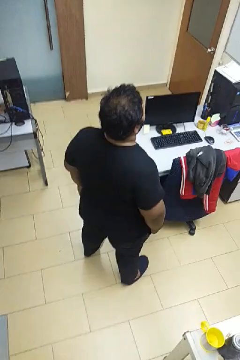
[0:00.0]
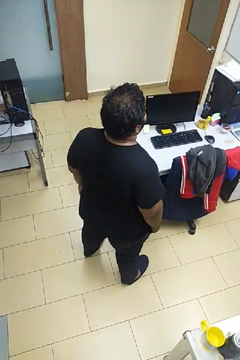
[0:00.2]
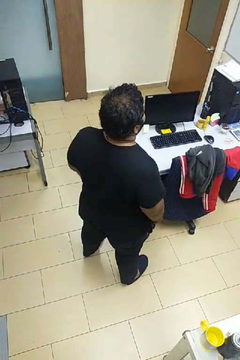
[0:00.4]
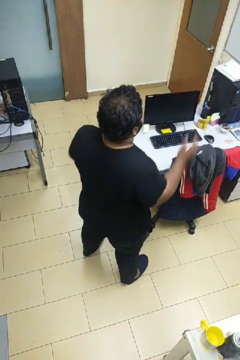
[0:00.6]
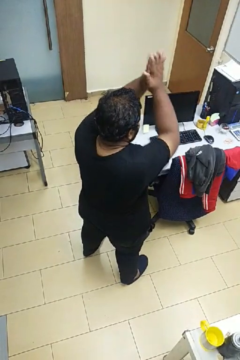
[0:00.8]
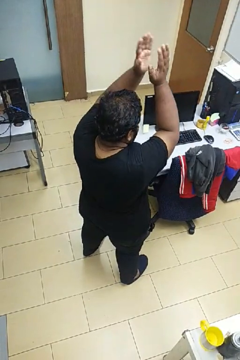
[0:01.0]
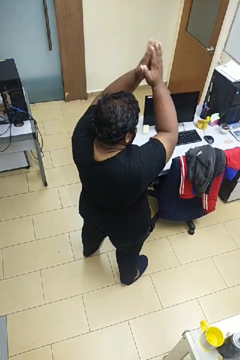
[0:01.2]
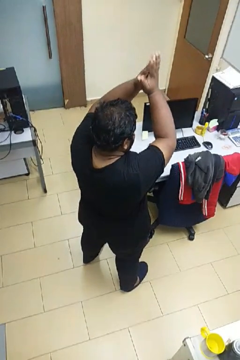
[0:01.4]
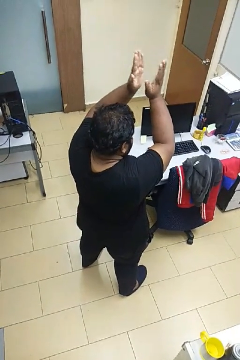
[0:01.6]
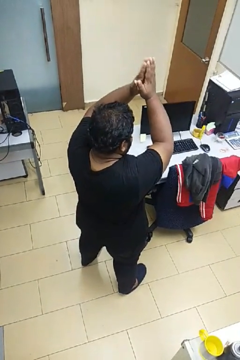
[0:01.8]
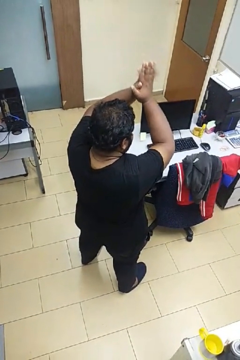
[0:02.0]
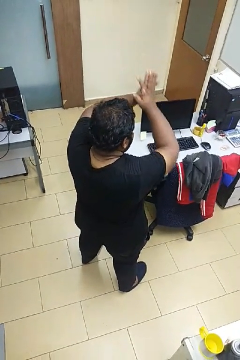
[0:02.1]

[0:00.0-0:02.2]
person claps hands

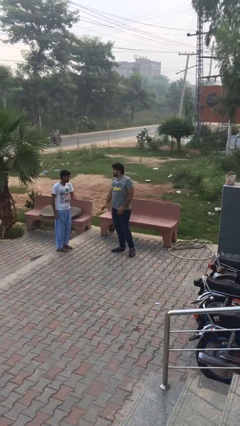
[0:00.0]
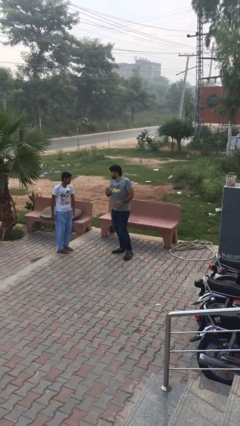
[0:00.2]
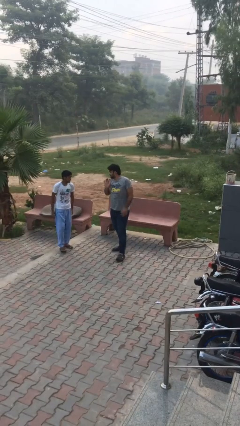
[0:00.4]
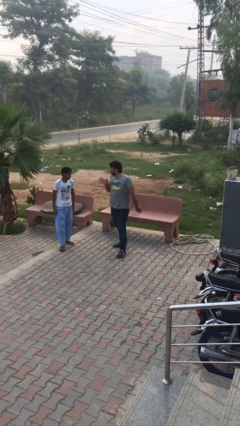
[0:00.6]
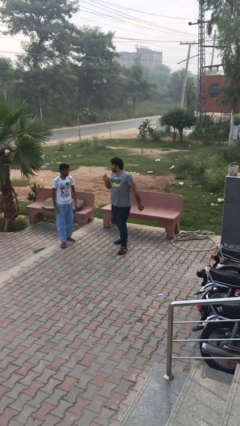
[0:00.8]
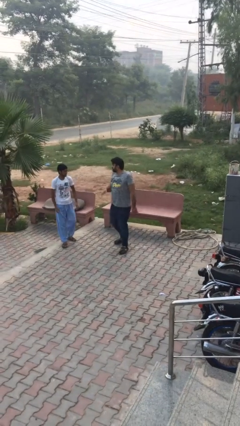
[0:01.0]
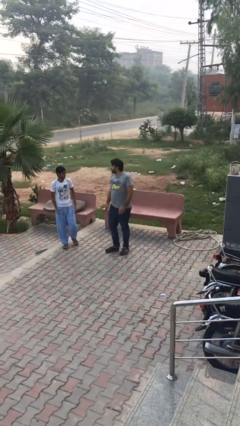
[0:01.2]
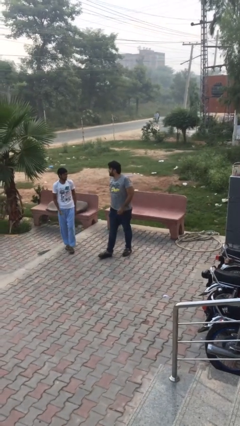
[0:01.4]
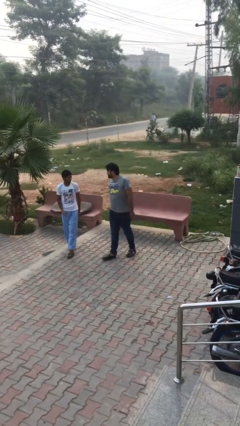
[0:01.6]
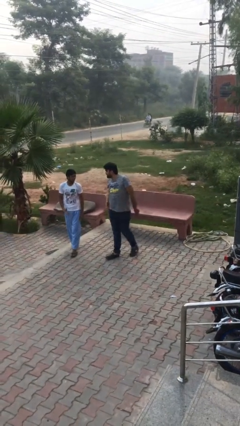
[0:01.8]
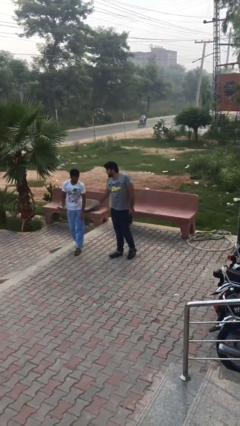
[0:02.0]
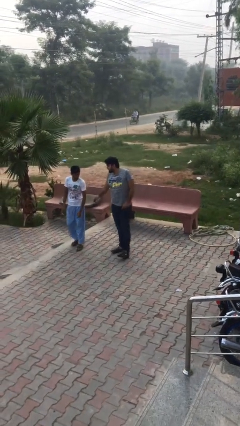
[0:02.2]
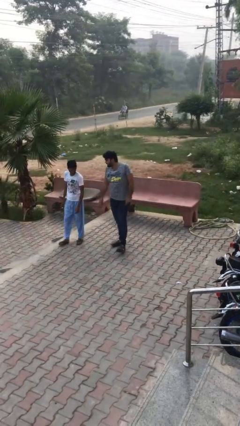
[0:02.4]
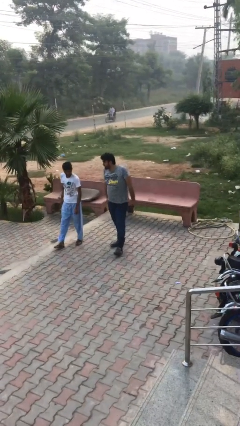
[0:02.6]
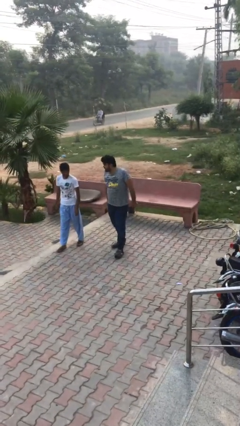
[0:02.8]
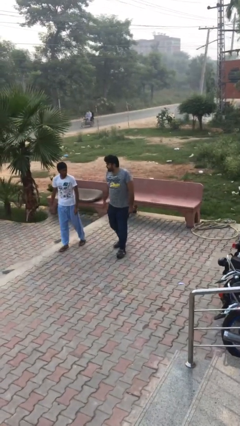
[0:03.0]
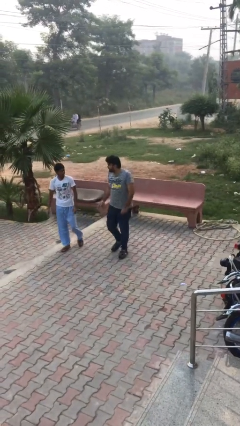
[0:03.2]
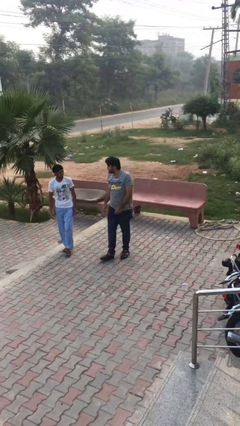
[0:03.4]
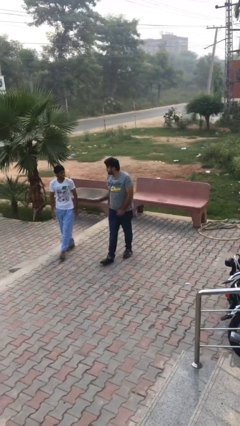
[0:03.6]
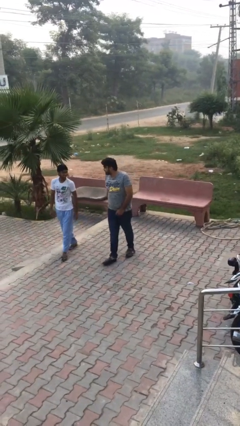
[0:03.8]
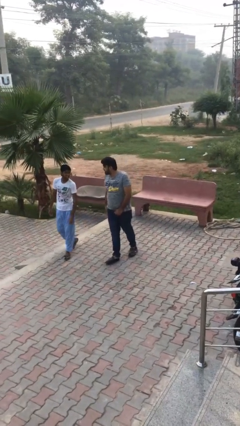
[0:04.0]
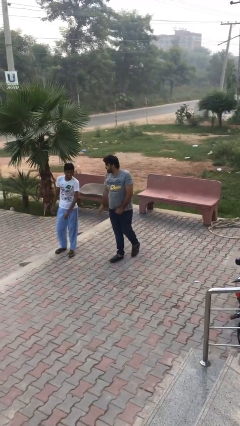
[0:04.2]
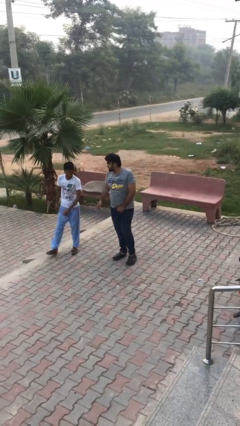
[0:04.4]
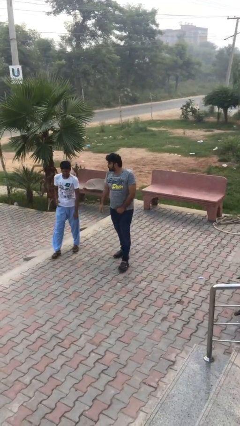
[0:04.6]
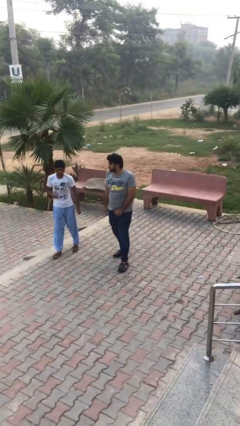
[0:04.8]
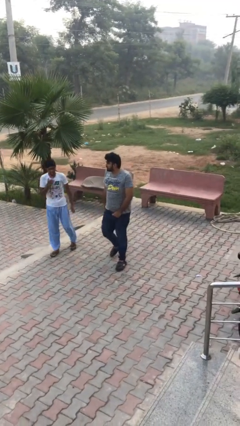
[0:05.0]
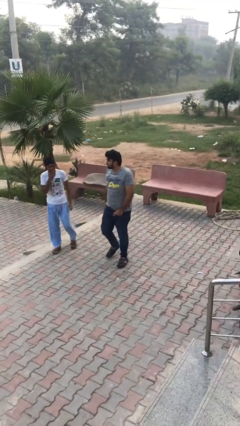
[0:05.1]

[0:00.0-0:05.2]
person talks to person

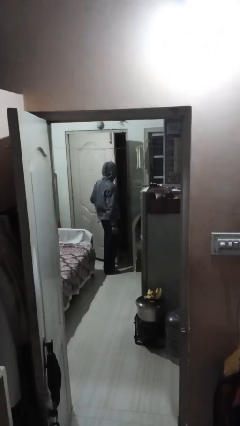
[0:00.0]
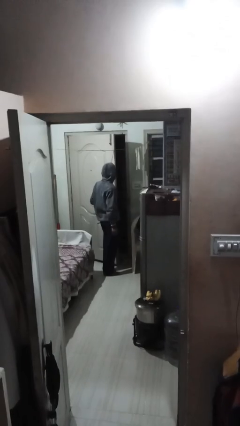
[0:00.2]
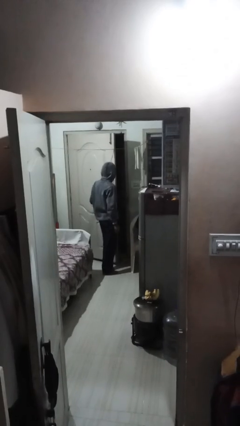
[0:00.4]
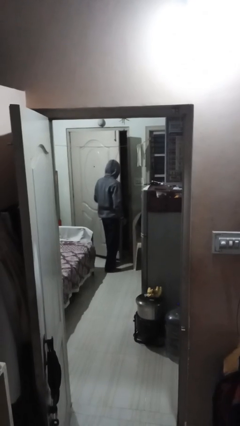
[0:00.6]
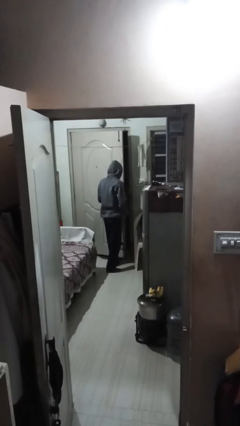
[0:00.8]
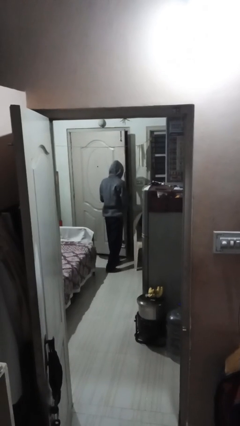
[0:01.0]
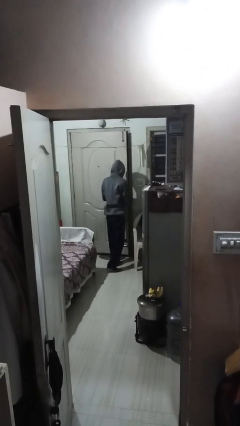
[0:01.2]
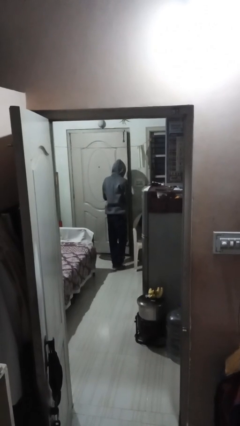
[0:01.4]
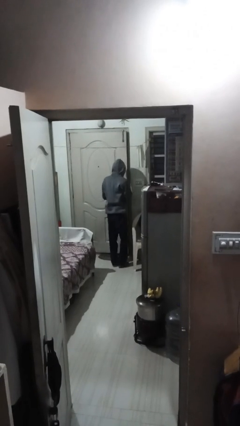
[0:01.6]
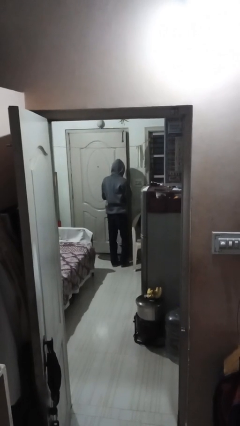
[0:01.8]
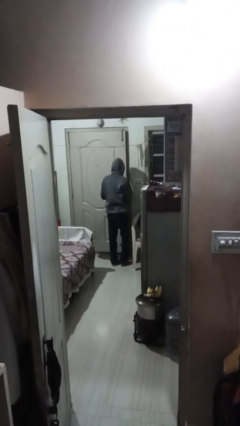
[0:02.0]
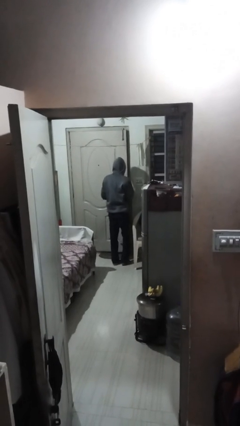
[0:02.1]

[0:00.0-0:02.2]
person closes facility door

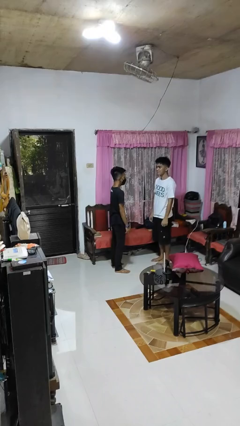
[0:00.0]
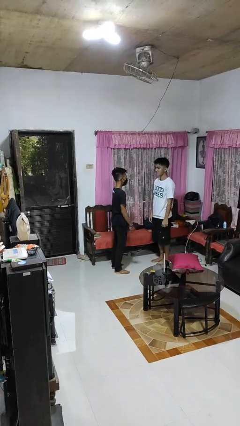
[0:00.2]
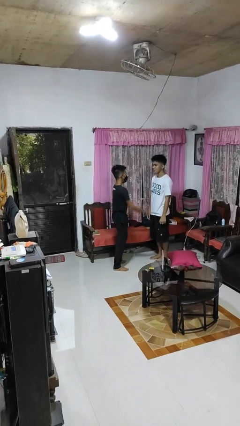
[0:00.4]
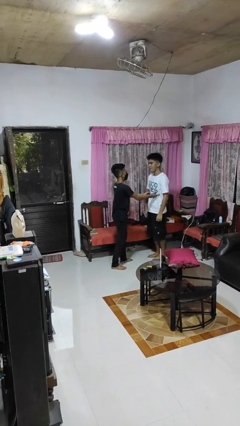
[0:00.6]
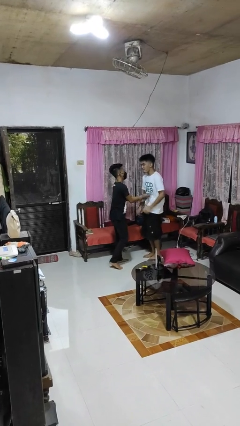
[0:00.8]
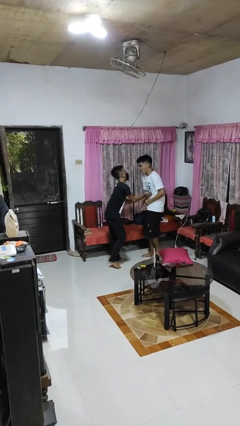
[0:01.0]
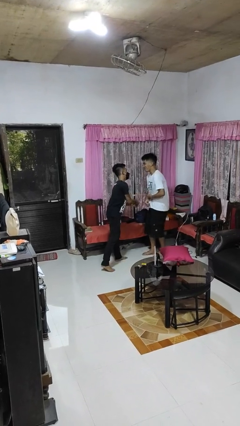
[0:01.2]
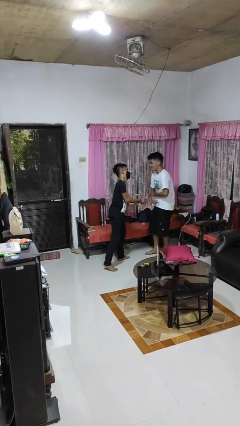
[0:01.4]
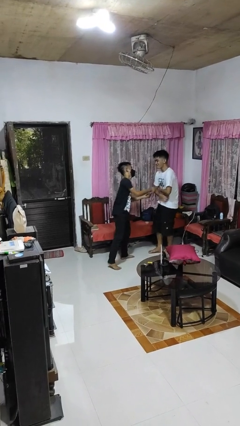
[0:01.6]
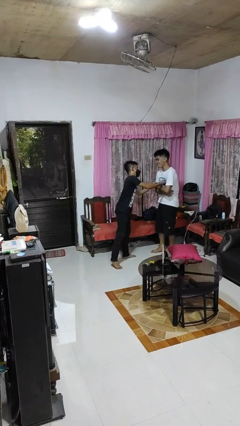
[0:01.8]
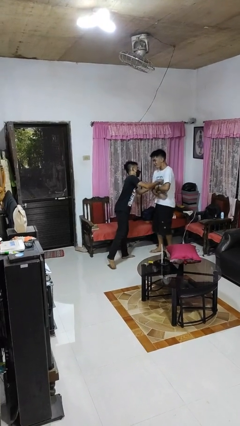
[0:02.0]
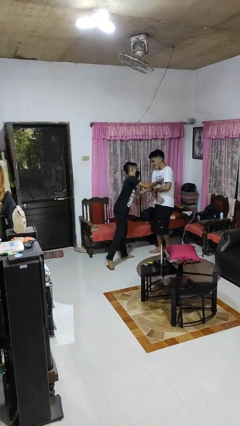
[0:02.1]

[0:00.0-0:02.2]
person tickles person

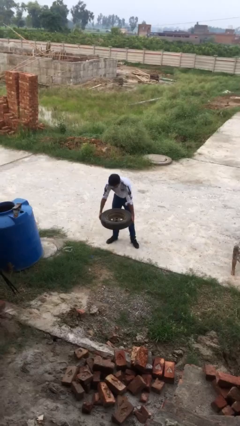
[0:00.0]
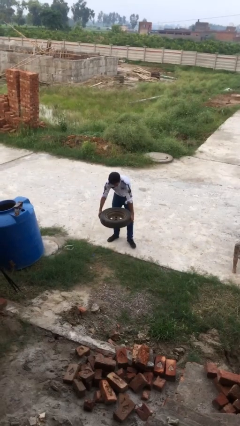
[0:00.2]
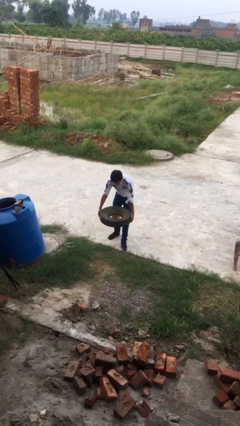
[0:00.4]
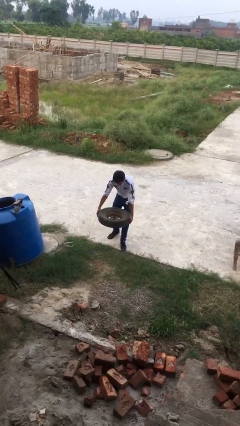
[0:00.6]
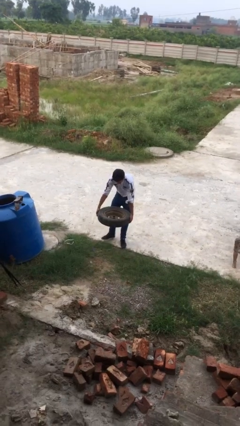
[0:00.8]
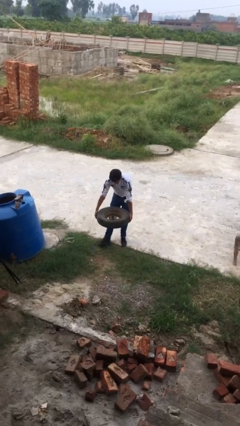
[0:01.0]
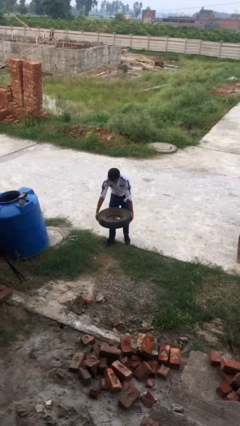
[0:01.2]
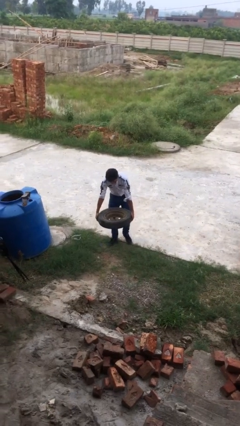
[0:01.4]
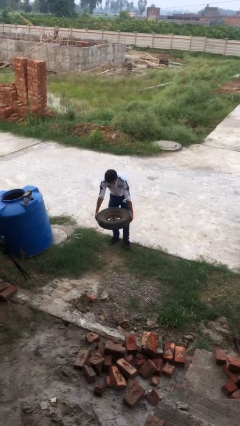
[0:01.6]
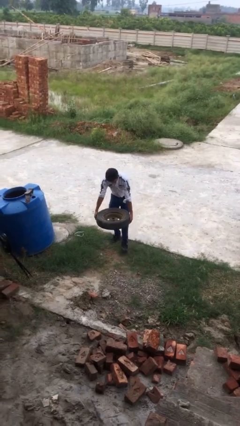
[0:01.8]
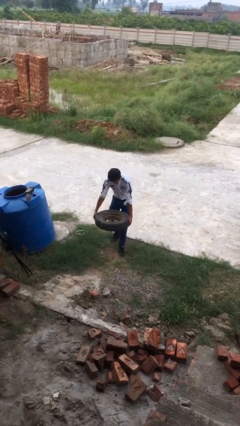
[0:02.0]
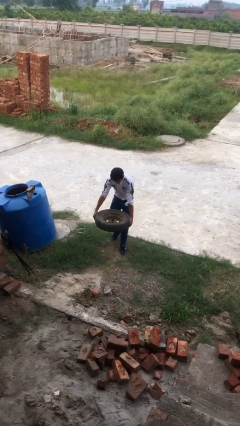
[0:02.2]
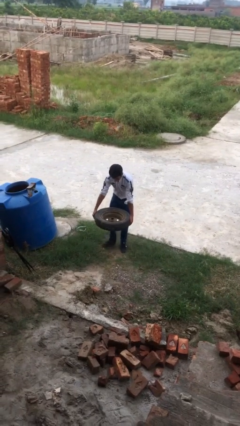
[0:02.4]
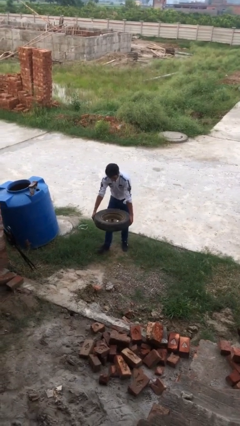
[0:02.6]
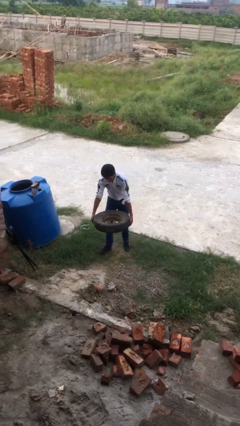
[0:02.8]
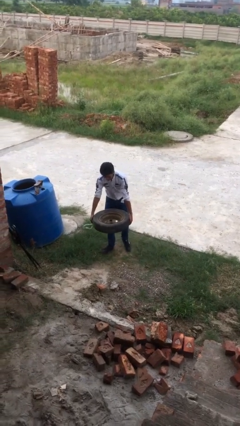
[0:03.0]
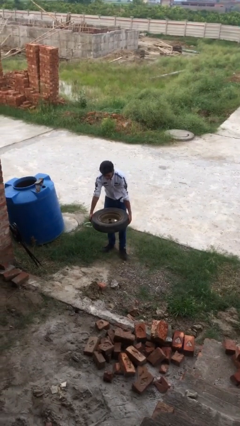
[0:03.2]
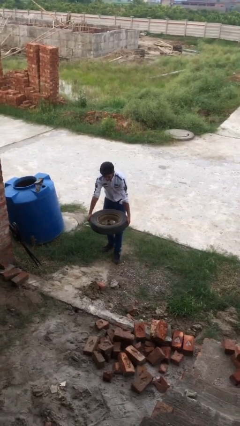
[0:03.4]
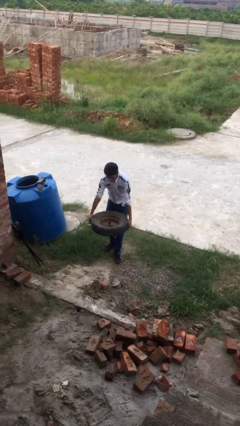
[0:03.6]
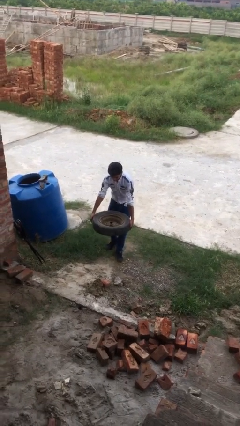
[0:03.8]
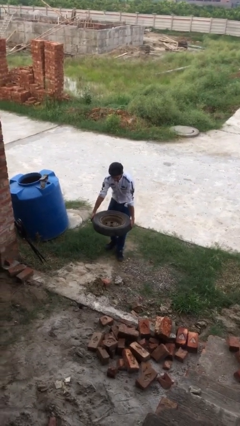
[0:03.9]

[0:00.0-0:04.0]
person carries heavy object

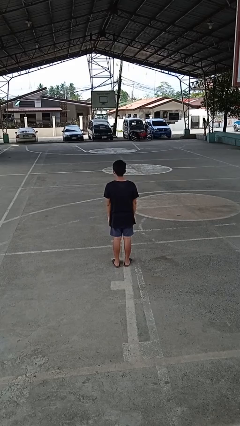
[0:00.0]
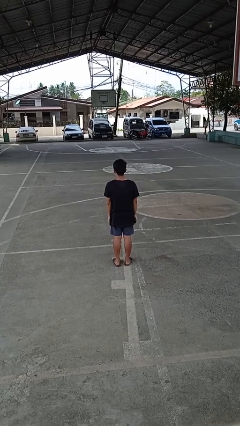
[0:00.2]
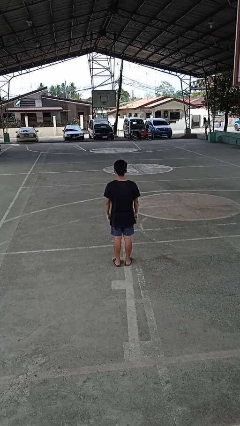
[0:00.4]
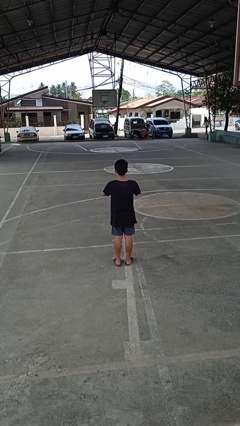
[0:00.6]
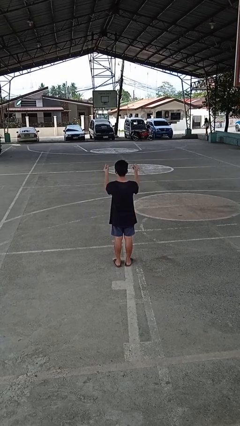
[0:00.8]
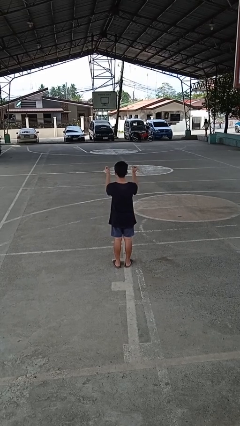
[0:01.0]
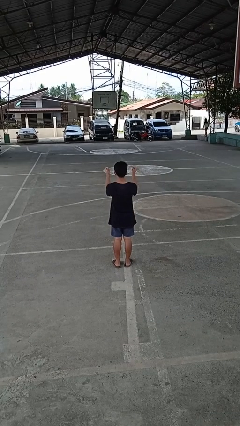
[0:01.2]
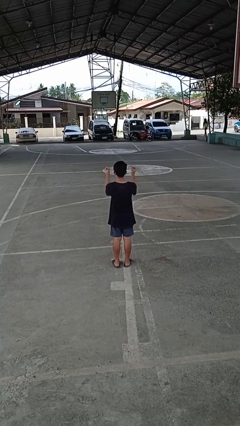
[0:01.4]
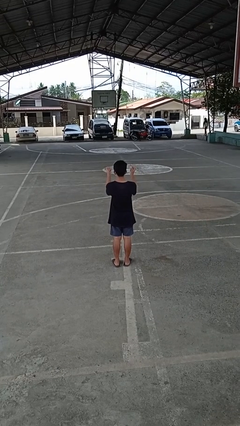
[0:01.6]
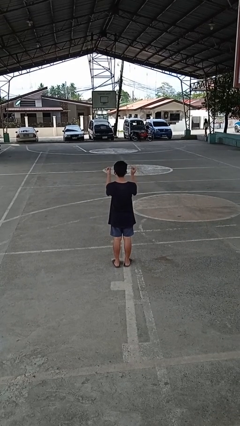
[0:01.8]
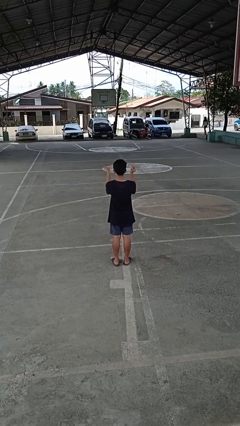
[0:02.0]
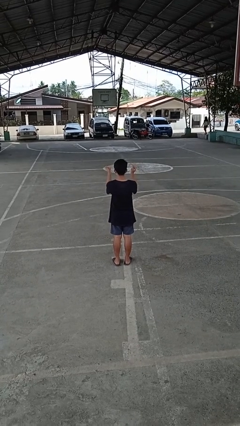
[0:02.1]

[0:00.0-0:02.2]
person snaps fingers
